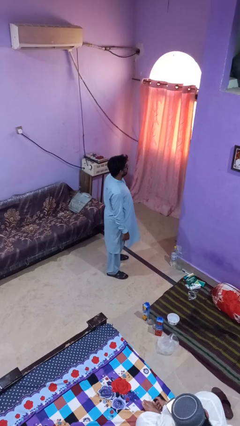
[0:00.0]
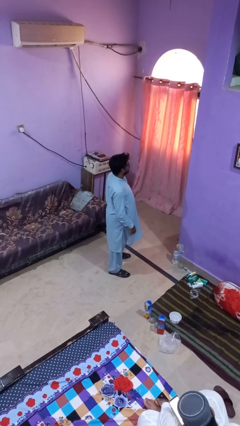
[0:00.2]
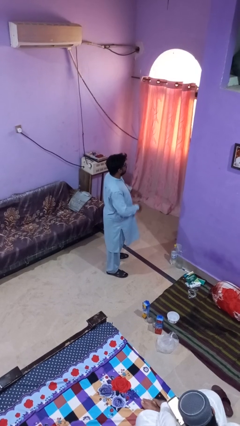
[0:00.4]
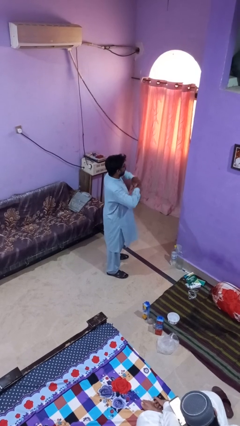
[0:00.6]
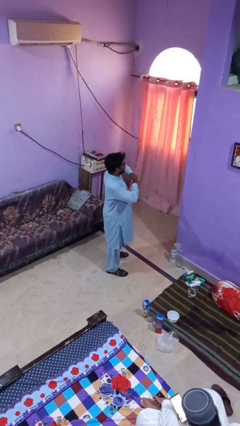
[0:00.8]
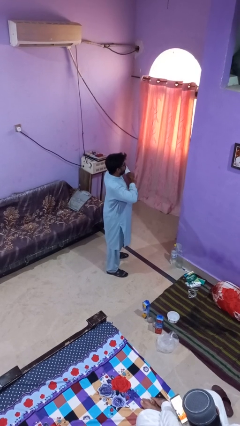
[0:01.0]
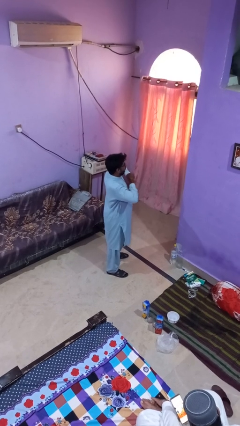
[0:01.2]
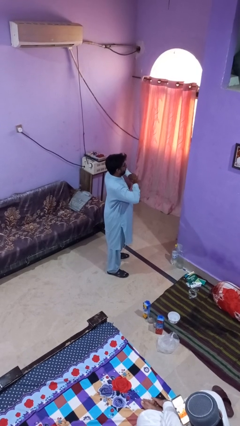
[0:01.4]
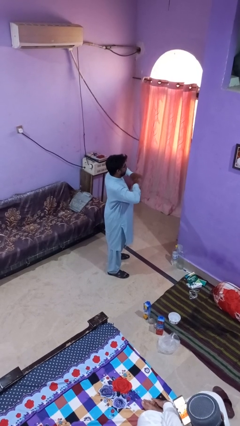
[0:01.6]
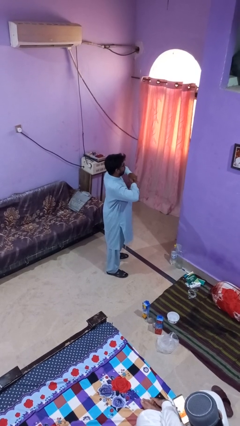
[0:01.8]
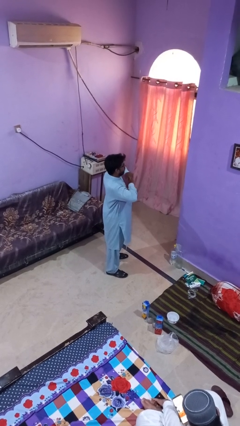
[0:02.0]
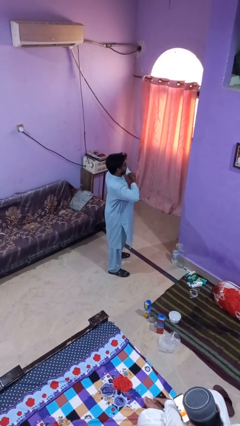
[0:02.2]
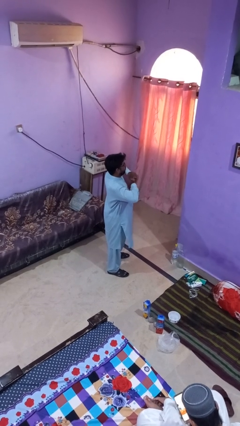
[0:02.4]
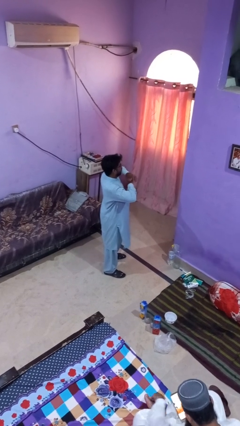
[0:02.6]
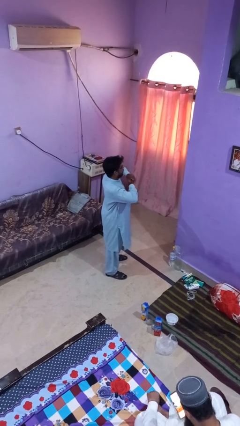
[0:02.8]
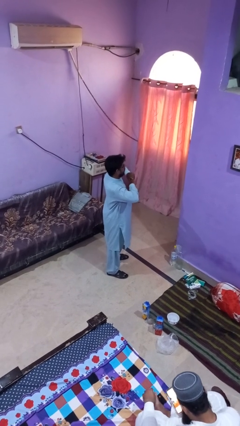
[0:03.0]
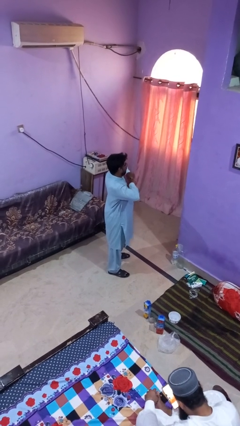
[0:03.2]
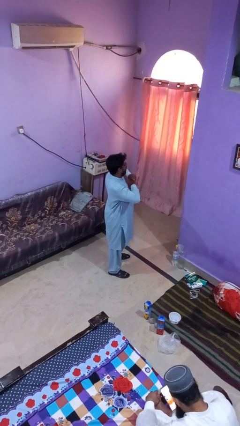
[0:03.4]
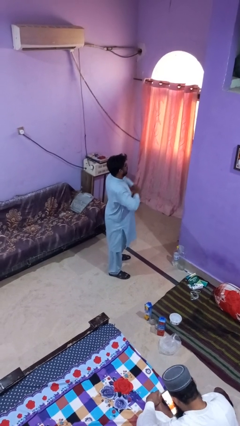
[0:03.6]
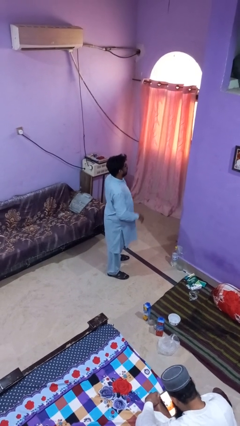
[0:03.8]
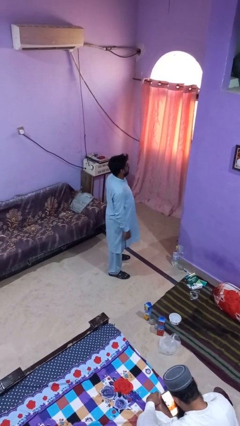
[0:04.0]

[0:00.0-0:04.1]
person cracks knuckles

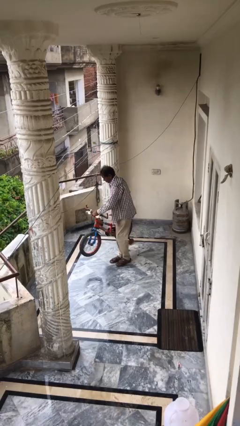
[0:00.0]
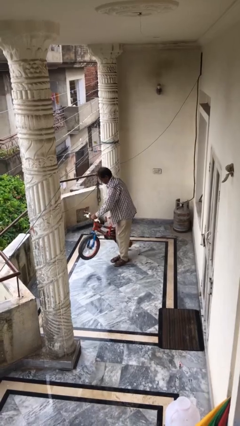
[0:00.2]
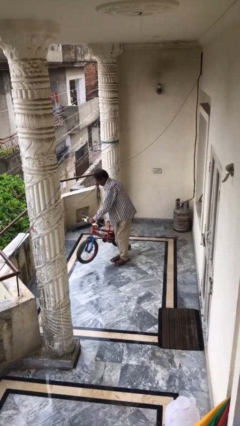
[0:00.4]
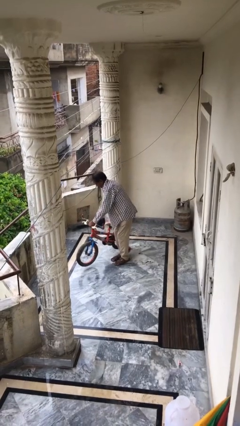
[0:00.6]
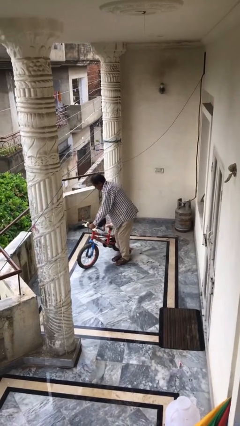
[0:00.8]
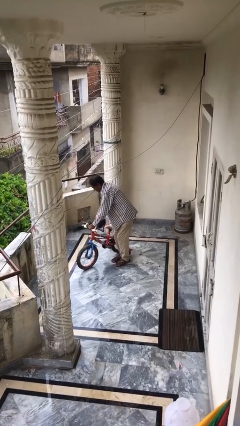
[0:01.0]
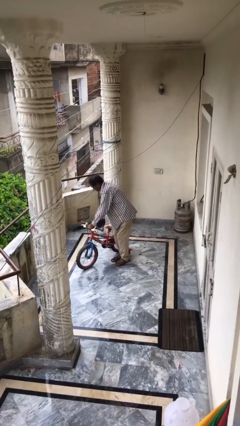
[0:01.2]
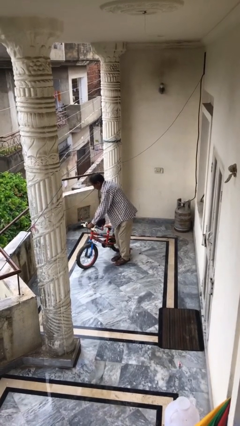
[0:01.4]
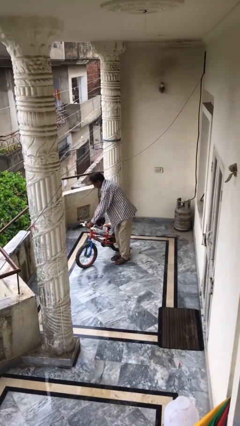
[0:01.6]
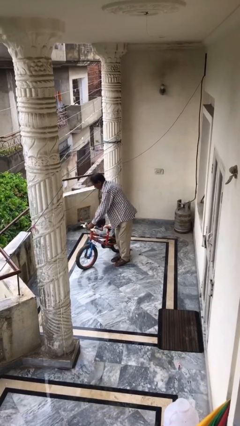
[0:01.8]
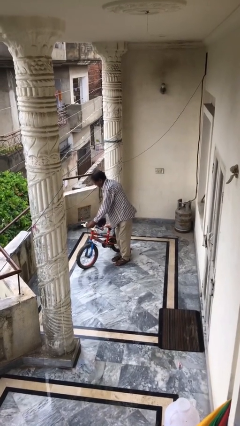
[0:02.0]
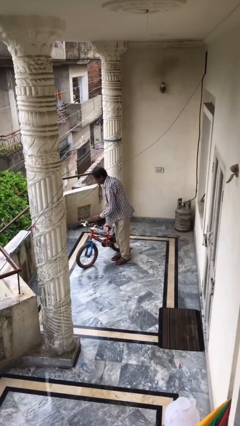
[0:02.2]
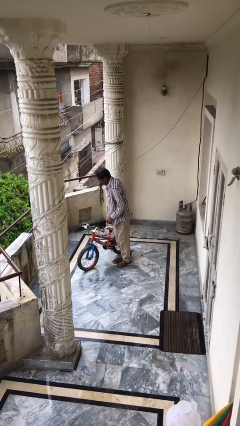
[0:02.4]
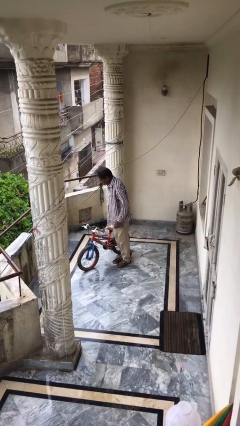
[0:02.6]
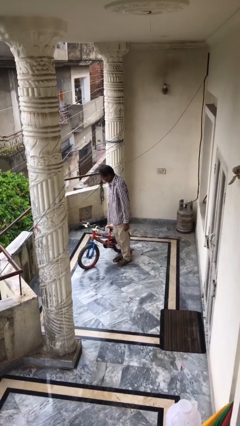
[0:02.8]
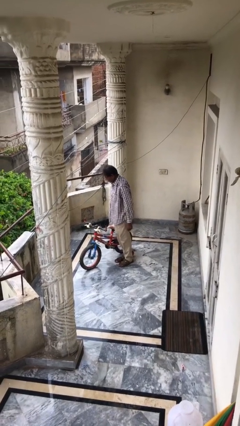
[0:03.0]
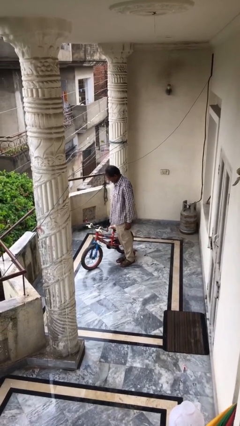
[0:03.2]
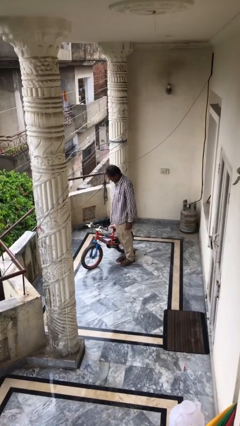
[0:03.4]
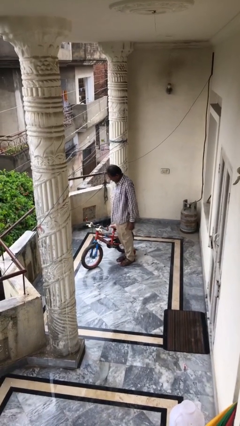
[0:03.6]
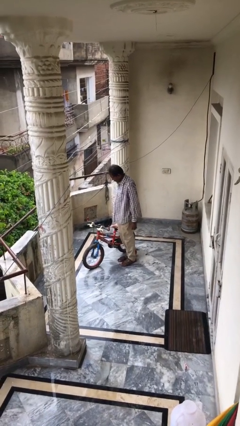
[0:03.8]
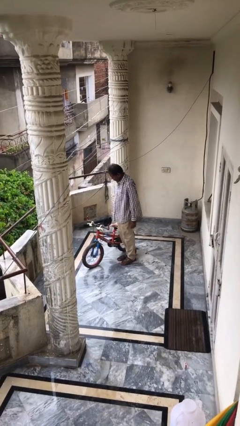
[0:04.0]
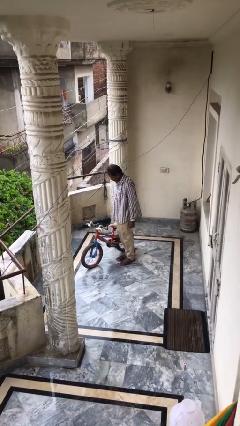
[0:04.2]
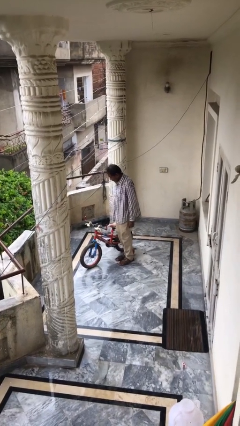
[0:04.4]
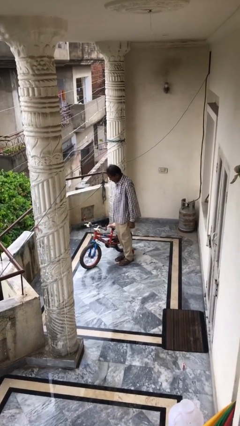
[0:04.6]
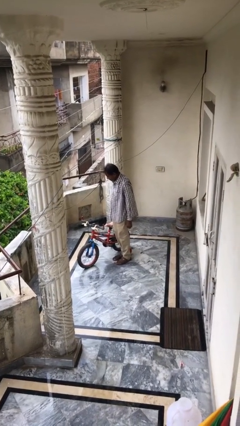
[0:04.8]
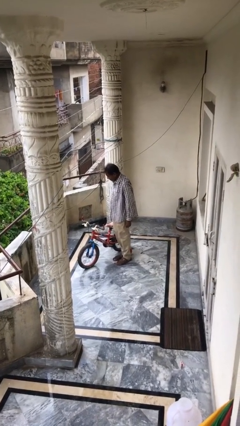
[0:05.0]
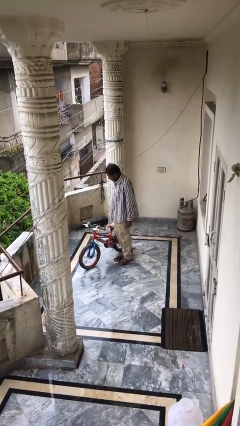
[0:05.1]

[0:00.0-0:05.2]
person puts down object on floor

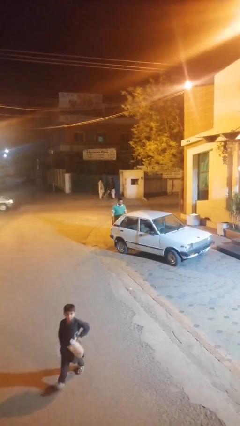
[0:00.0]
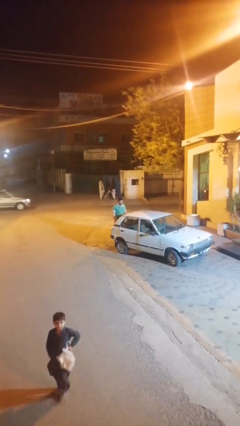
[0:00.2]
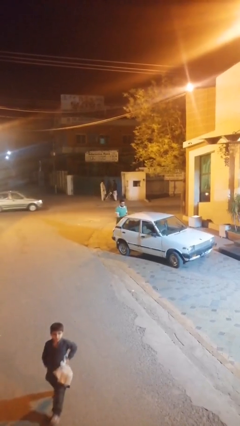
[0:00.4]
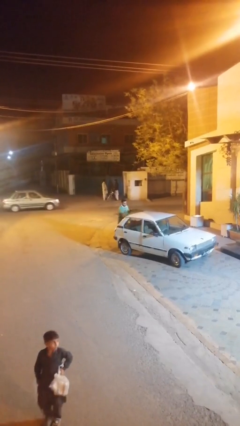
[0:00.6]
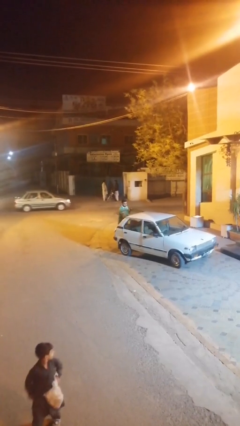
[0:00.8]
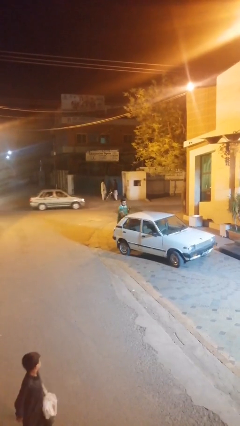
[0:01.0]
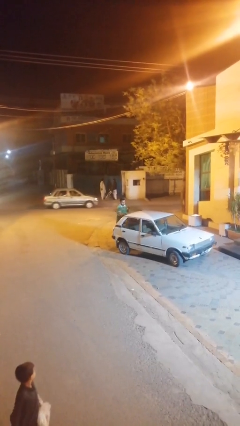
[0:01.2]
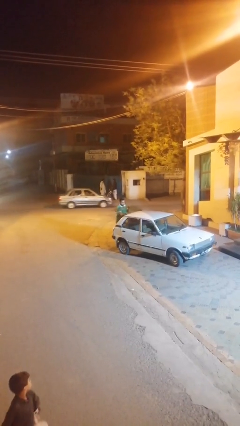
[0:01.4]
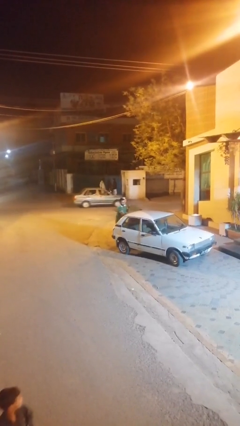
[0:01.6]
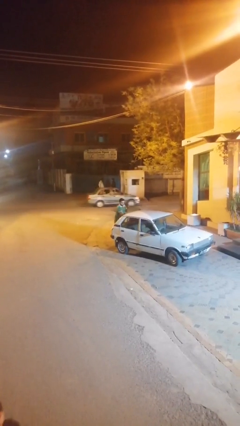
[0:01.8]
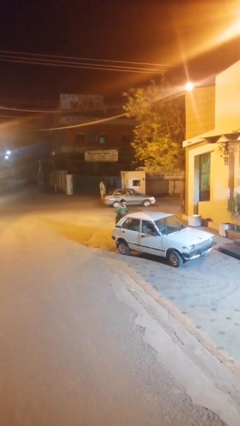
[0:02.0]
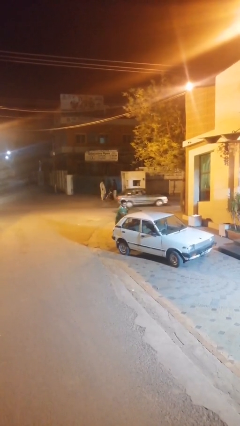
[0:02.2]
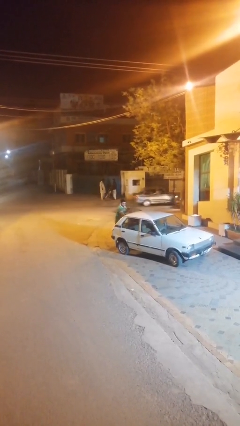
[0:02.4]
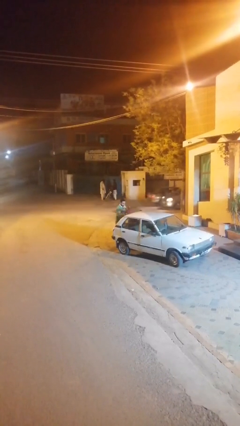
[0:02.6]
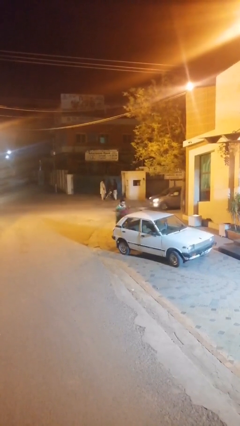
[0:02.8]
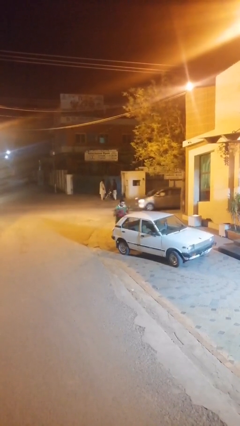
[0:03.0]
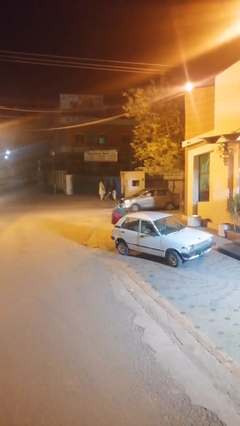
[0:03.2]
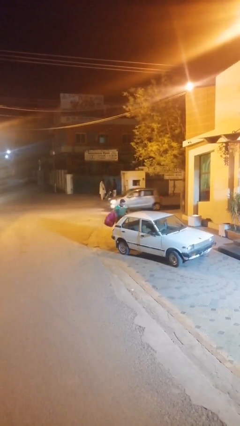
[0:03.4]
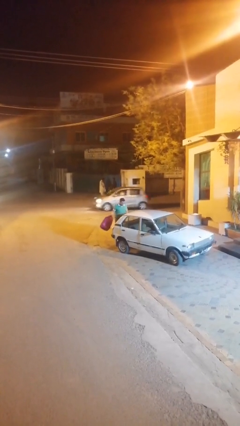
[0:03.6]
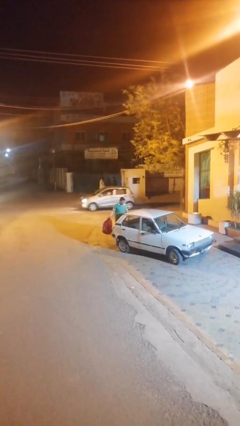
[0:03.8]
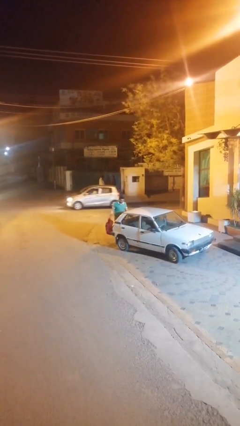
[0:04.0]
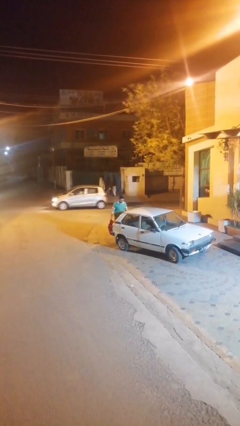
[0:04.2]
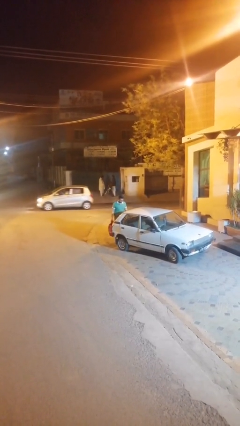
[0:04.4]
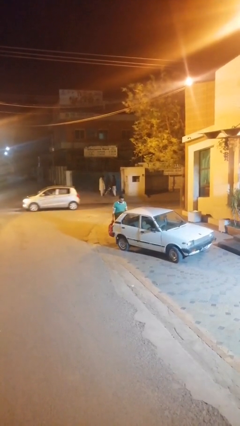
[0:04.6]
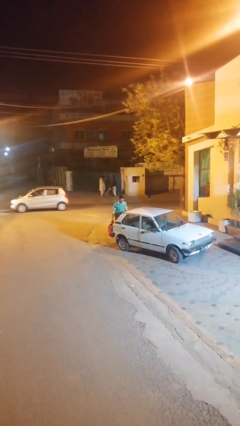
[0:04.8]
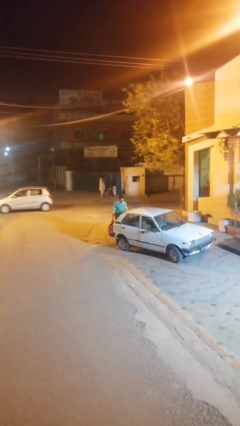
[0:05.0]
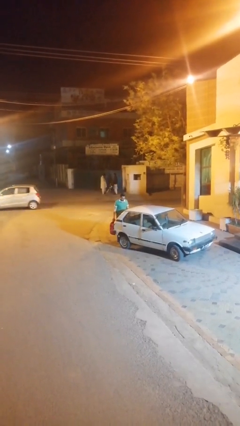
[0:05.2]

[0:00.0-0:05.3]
person unloads car

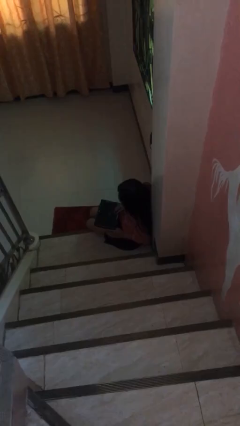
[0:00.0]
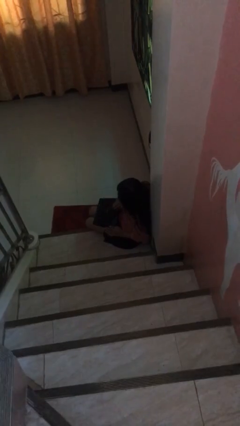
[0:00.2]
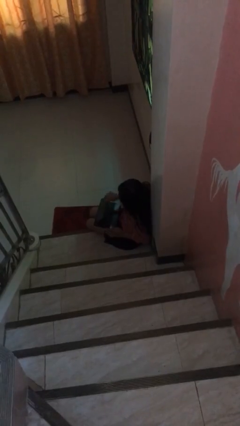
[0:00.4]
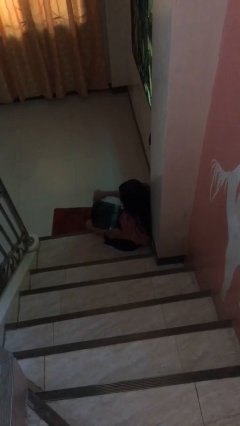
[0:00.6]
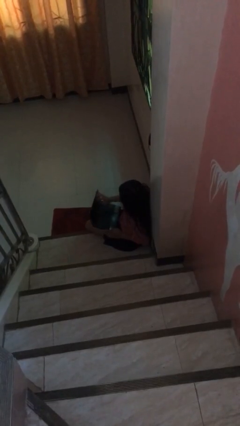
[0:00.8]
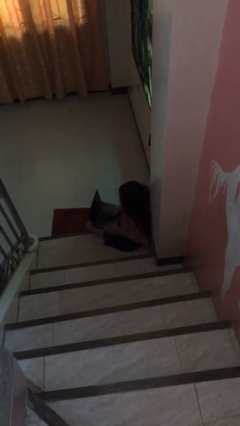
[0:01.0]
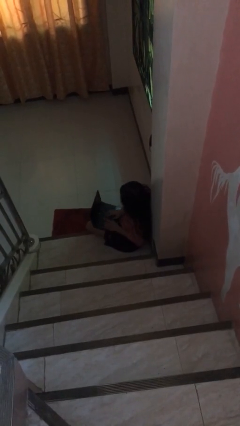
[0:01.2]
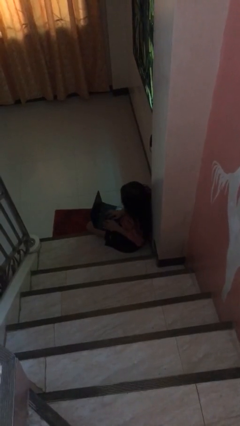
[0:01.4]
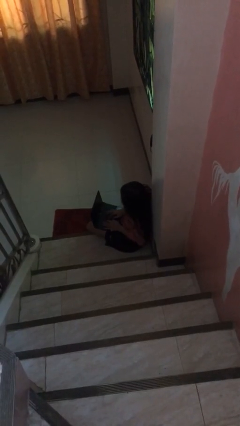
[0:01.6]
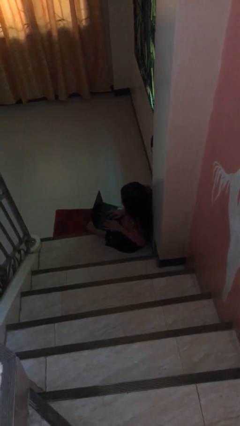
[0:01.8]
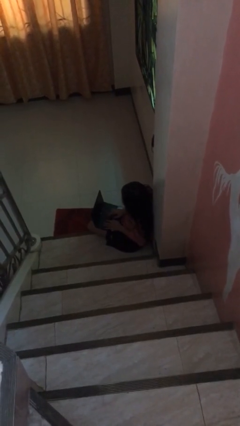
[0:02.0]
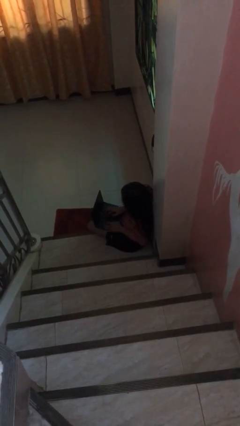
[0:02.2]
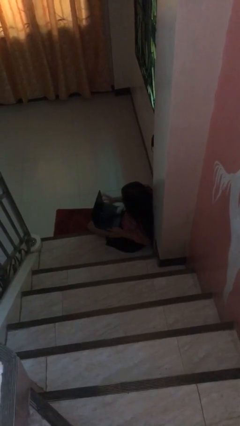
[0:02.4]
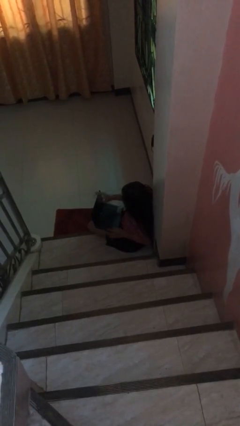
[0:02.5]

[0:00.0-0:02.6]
person interacts with laptop

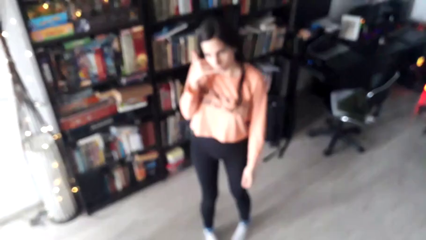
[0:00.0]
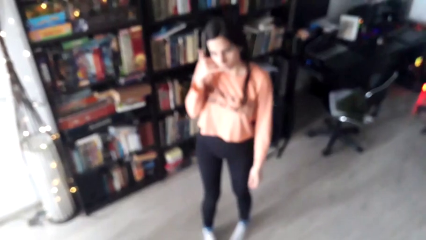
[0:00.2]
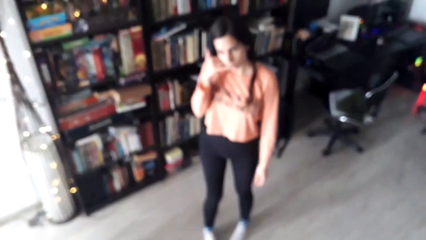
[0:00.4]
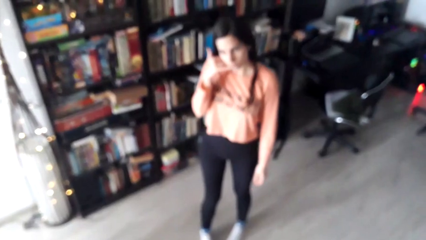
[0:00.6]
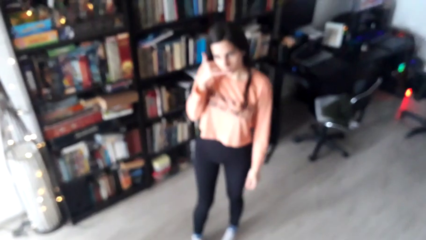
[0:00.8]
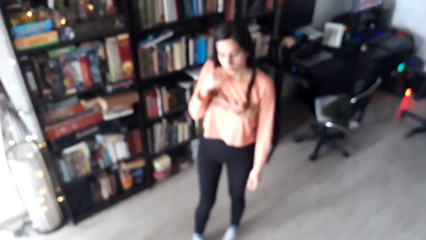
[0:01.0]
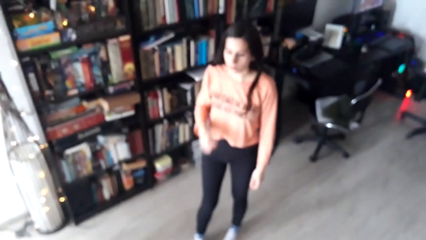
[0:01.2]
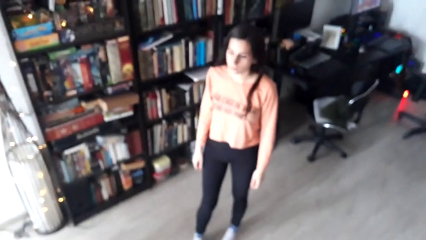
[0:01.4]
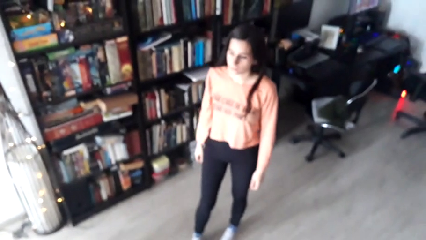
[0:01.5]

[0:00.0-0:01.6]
person gestures call me
